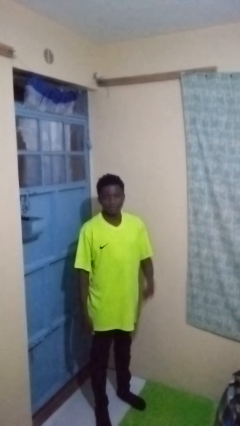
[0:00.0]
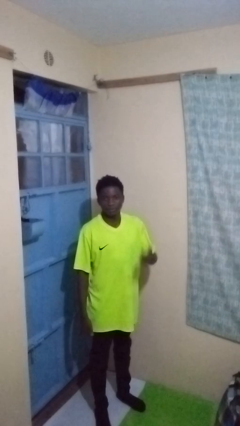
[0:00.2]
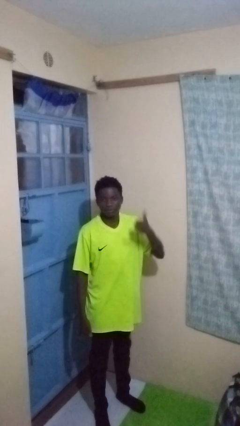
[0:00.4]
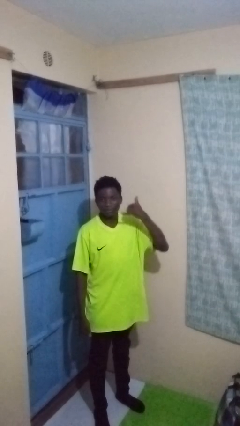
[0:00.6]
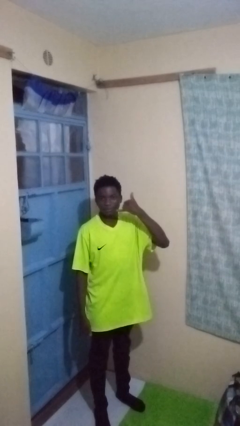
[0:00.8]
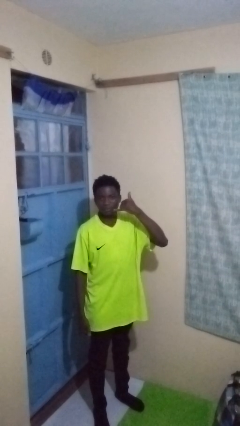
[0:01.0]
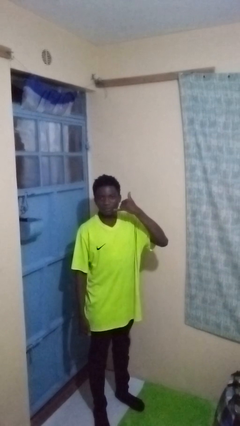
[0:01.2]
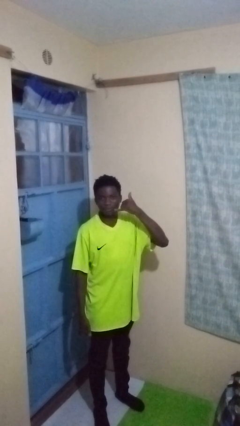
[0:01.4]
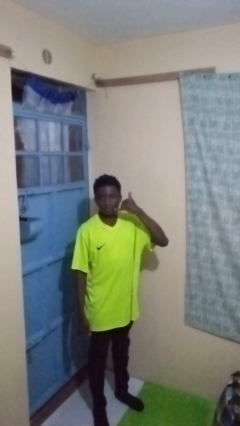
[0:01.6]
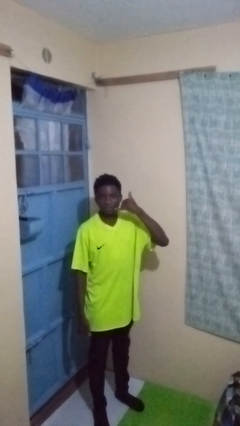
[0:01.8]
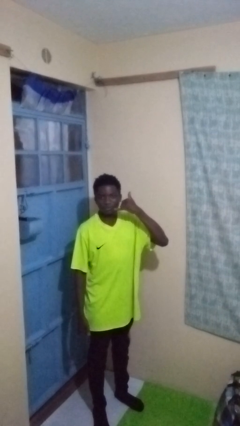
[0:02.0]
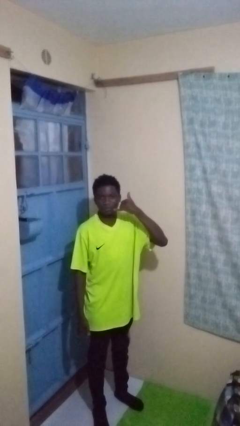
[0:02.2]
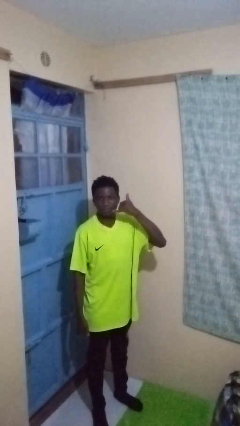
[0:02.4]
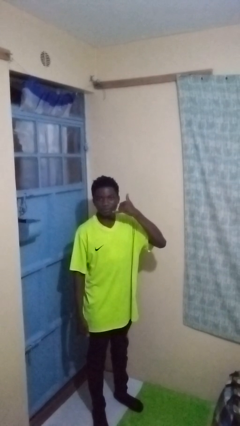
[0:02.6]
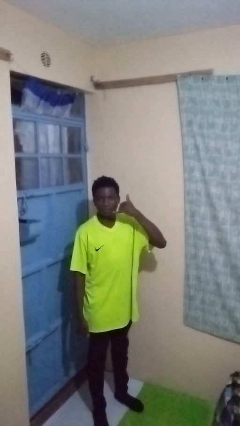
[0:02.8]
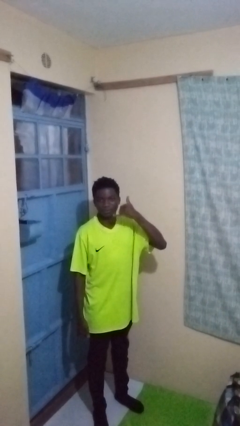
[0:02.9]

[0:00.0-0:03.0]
person gestures call me

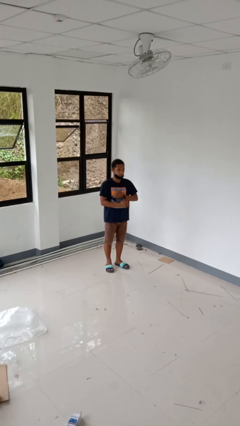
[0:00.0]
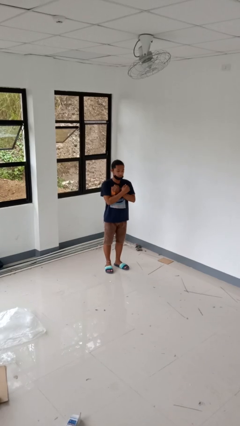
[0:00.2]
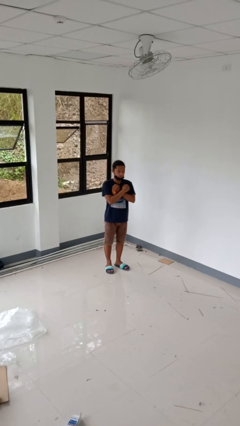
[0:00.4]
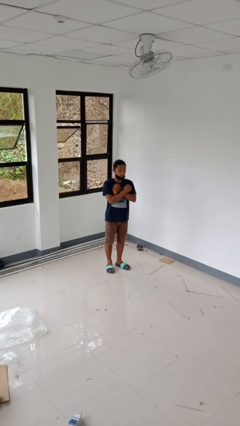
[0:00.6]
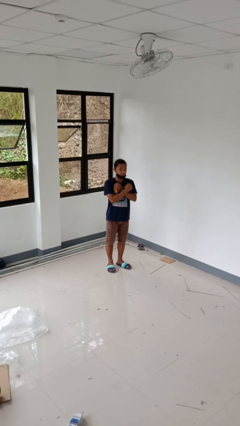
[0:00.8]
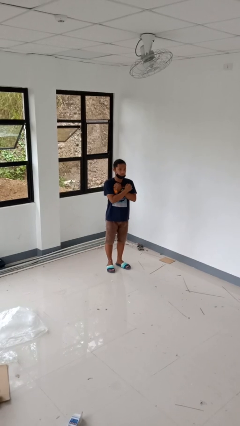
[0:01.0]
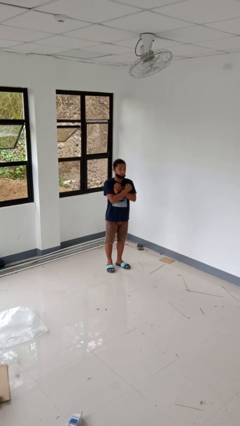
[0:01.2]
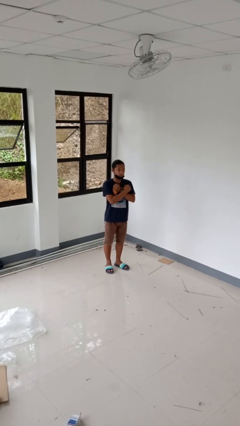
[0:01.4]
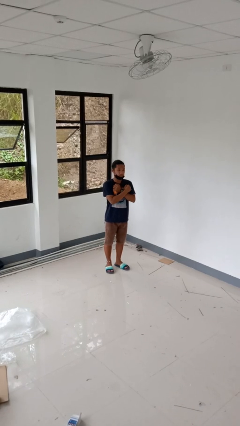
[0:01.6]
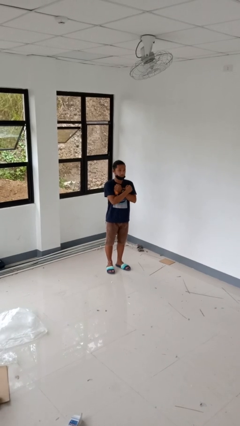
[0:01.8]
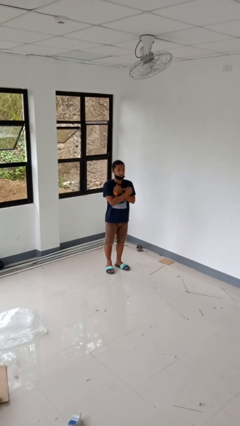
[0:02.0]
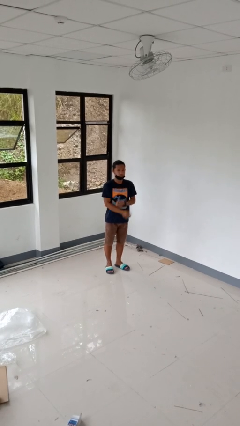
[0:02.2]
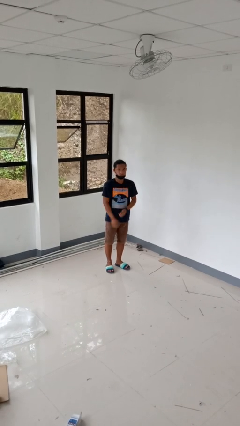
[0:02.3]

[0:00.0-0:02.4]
person gestures arms x

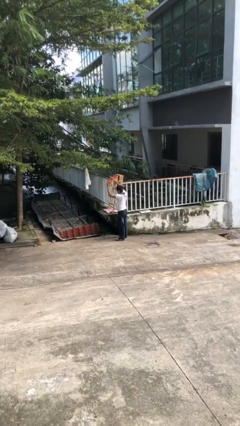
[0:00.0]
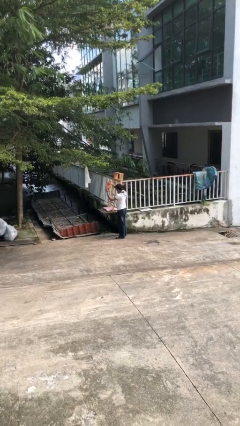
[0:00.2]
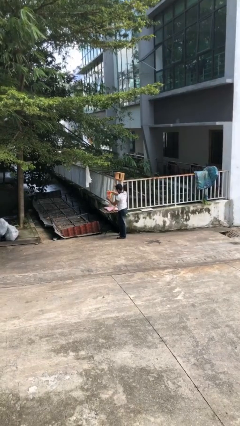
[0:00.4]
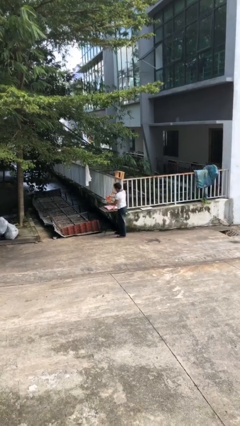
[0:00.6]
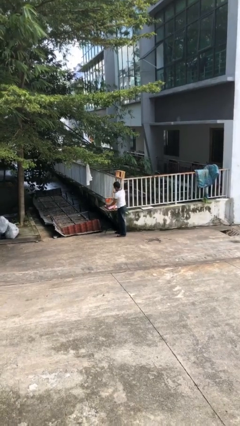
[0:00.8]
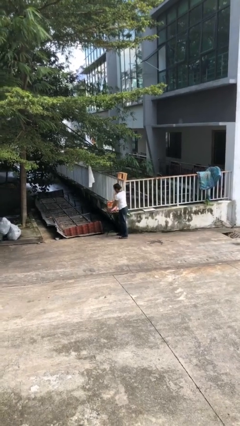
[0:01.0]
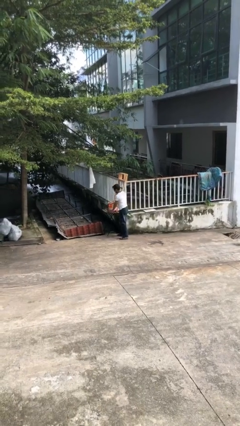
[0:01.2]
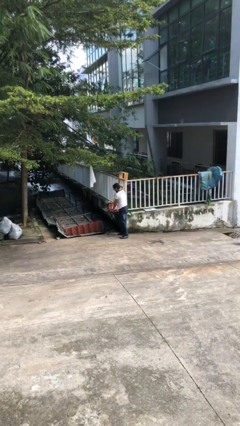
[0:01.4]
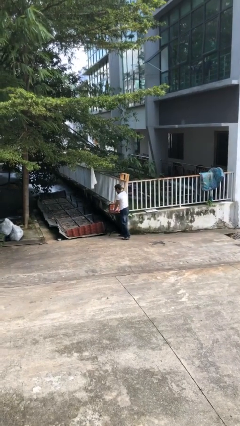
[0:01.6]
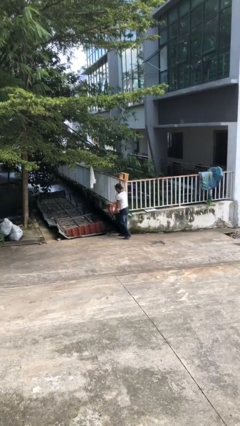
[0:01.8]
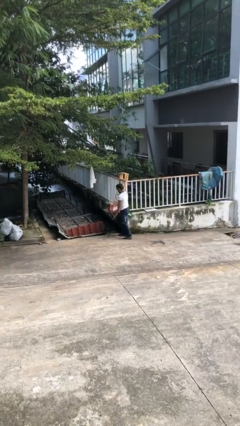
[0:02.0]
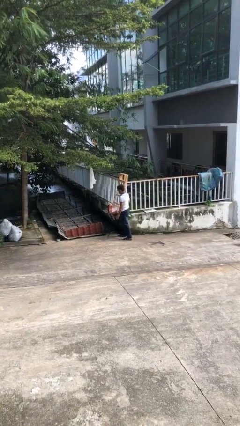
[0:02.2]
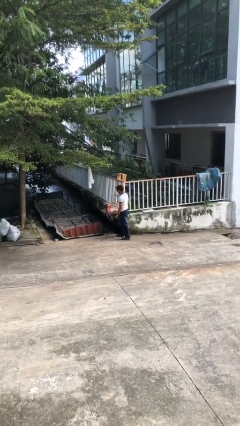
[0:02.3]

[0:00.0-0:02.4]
person puts down object on table

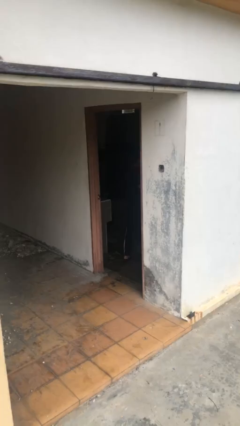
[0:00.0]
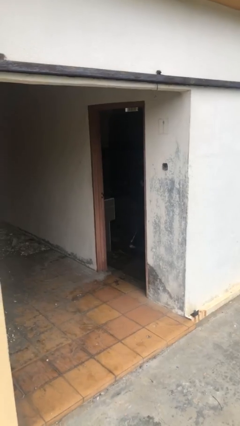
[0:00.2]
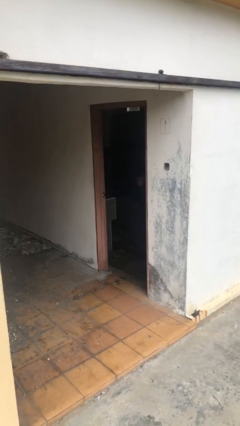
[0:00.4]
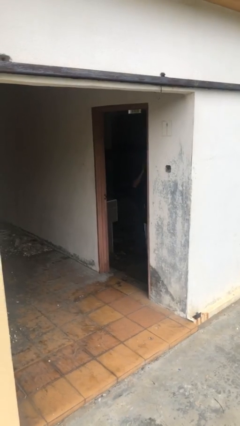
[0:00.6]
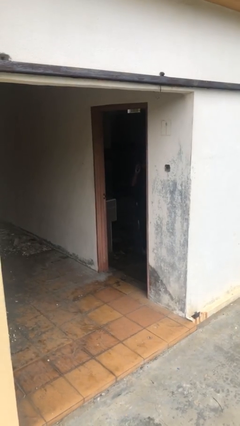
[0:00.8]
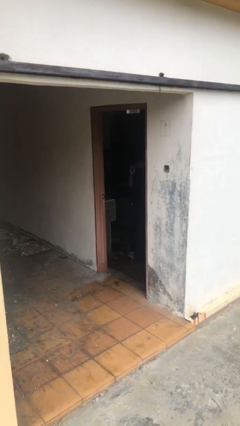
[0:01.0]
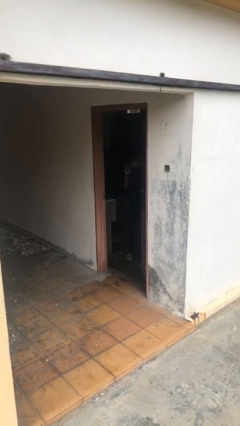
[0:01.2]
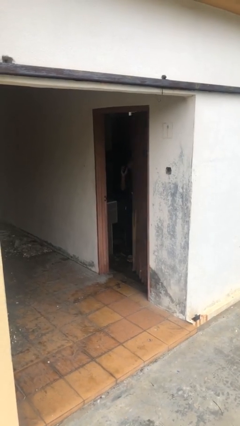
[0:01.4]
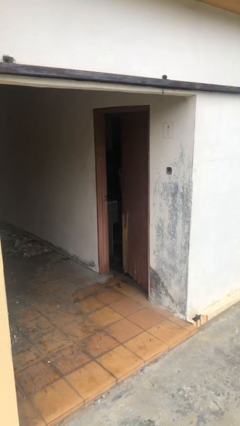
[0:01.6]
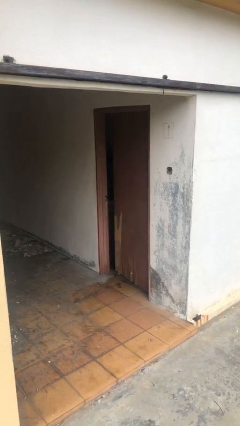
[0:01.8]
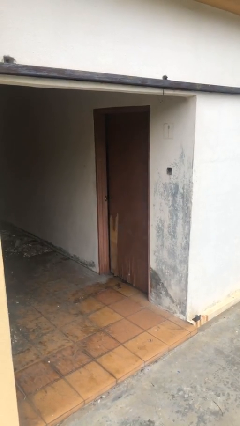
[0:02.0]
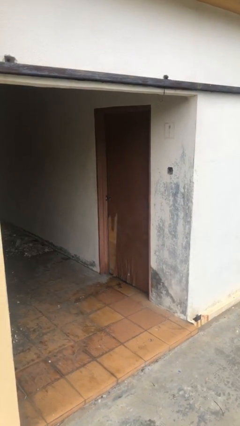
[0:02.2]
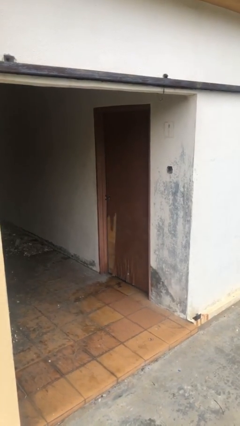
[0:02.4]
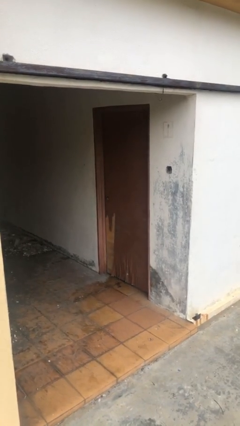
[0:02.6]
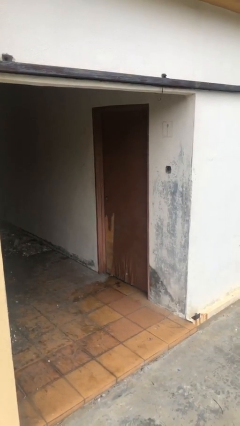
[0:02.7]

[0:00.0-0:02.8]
person closes facility door

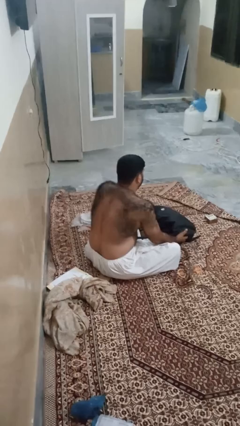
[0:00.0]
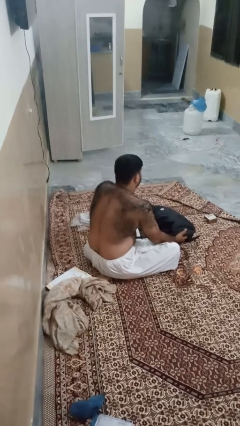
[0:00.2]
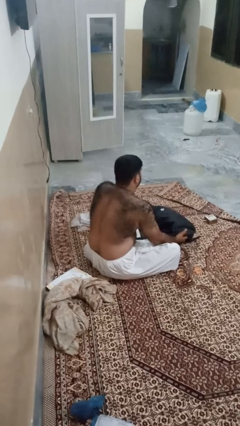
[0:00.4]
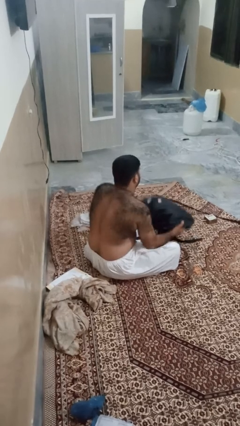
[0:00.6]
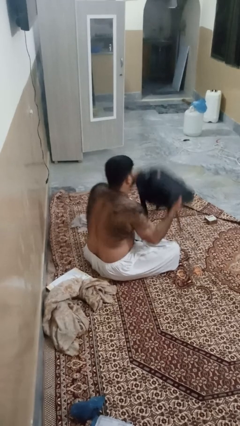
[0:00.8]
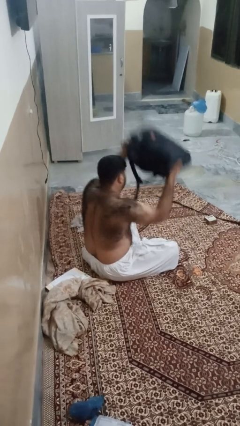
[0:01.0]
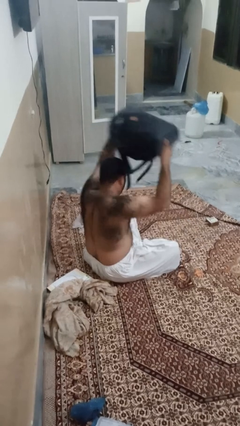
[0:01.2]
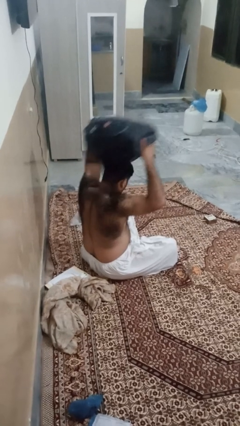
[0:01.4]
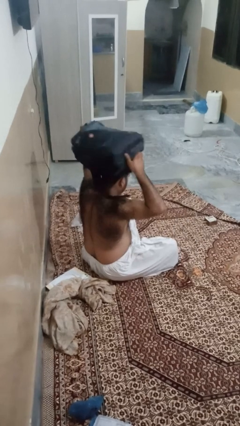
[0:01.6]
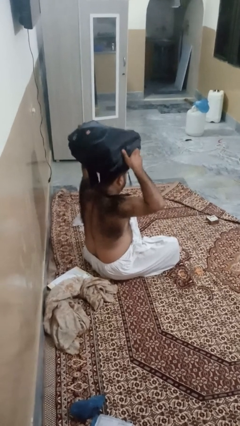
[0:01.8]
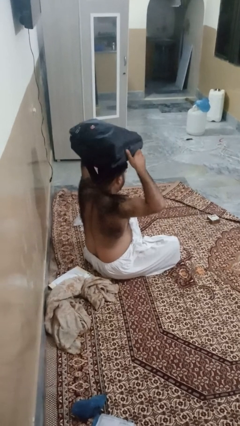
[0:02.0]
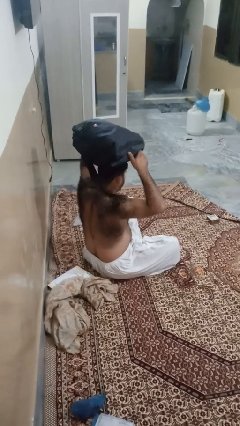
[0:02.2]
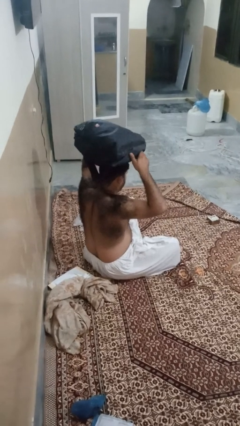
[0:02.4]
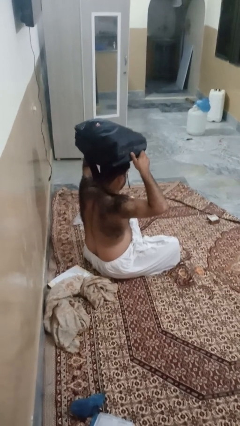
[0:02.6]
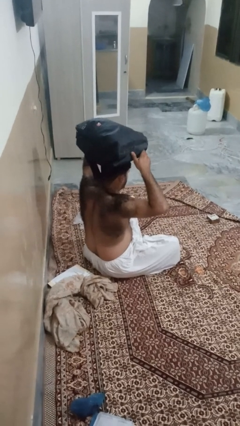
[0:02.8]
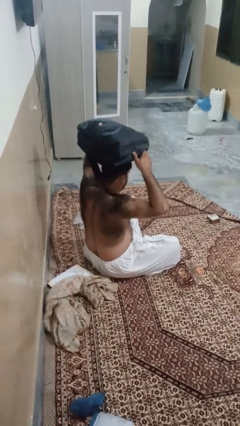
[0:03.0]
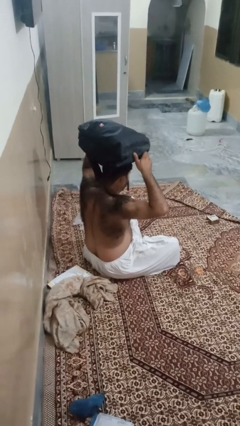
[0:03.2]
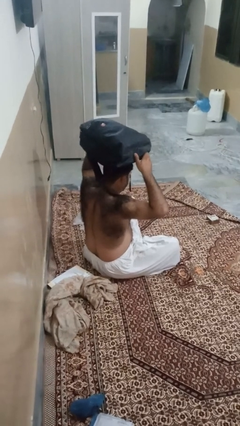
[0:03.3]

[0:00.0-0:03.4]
person holds object above head

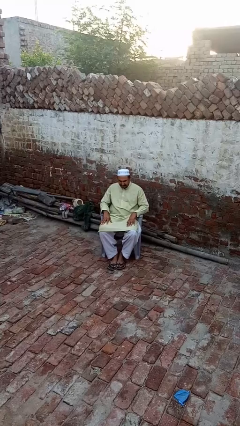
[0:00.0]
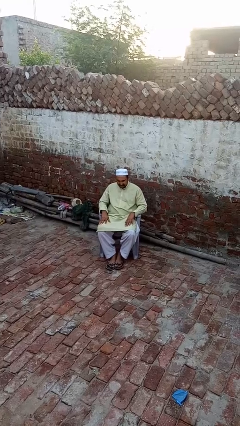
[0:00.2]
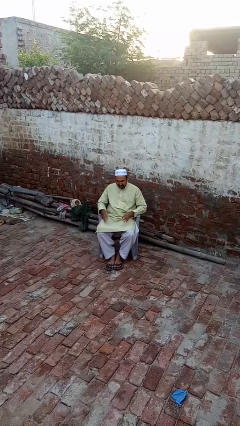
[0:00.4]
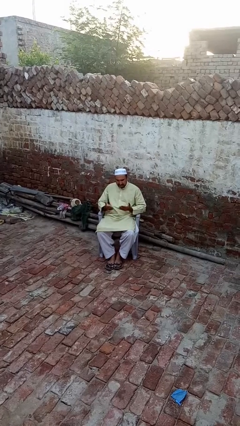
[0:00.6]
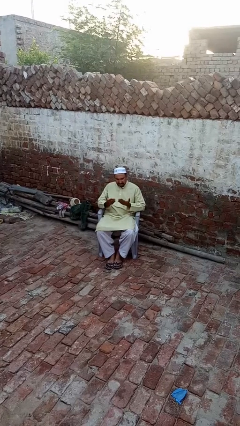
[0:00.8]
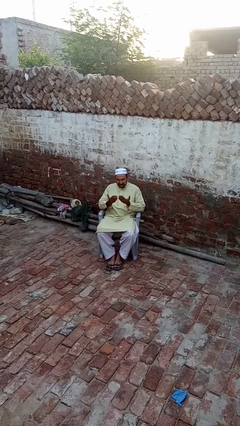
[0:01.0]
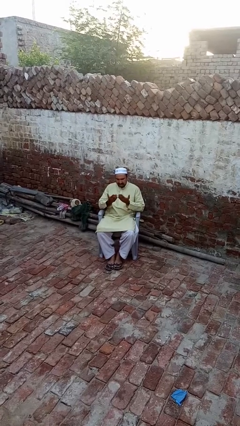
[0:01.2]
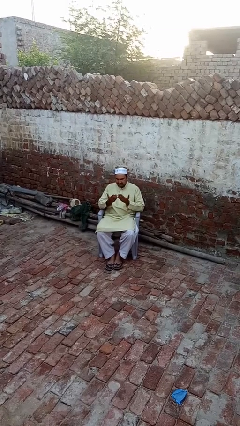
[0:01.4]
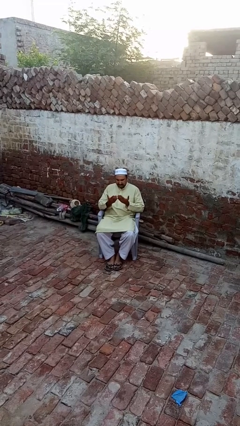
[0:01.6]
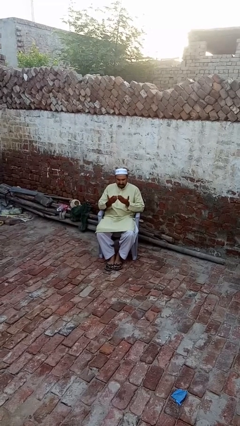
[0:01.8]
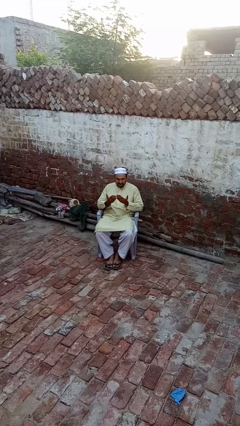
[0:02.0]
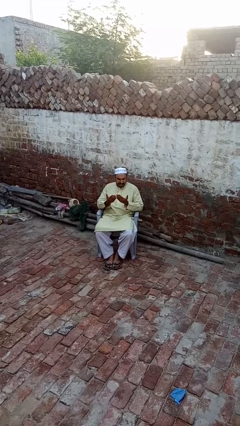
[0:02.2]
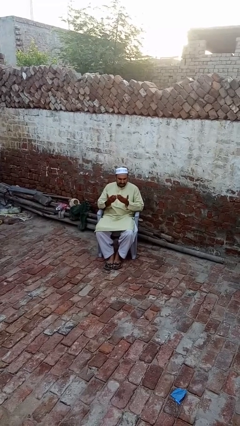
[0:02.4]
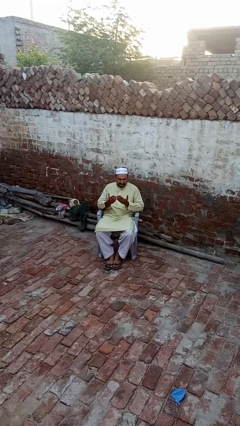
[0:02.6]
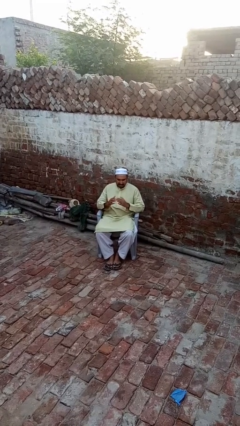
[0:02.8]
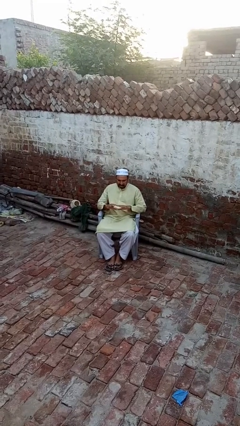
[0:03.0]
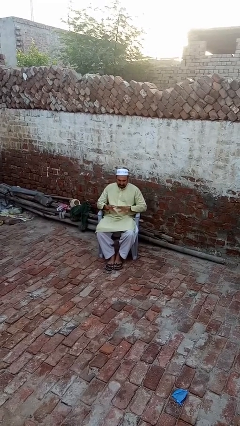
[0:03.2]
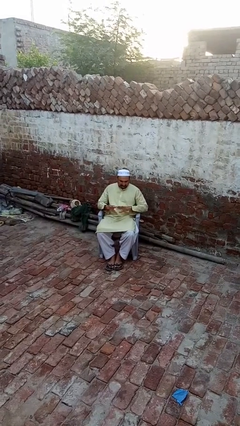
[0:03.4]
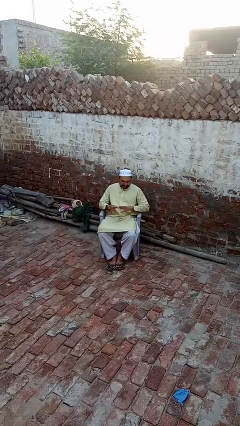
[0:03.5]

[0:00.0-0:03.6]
person looks at hands in lap
